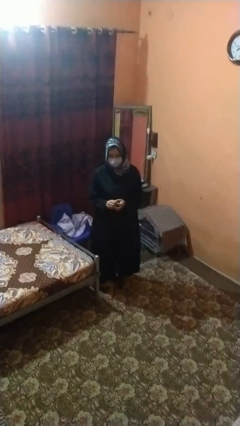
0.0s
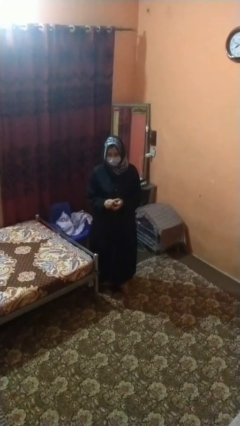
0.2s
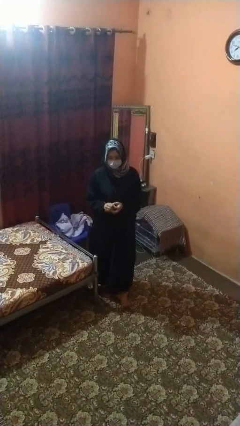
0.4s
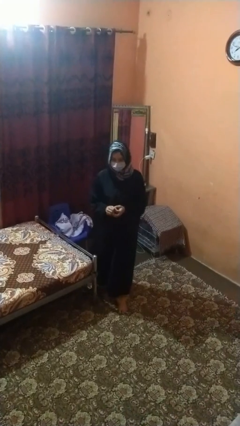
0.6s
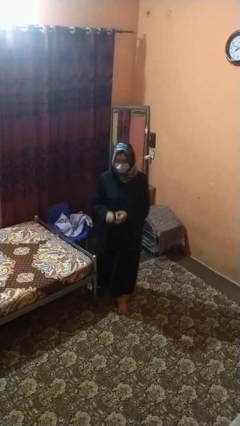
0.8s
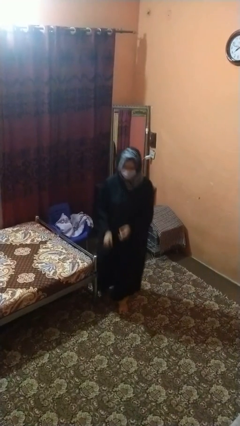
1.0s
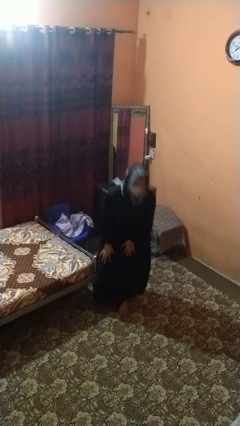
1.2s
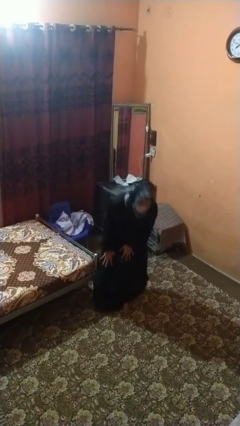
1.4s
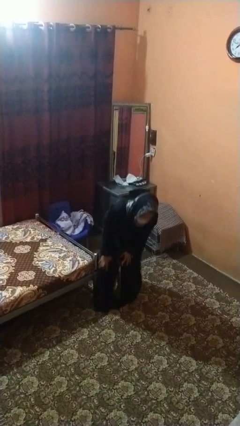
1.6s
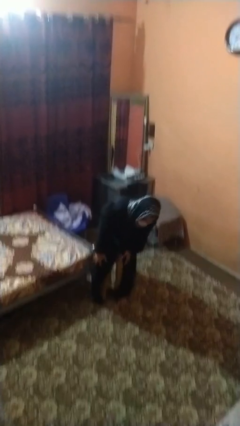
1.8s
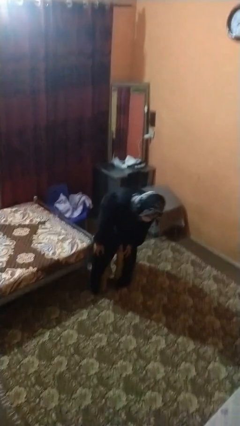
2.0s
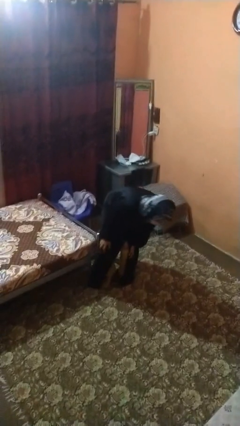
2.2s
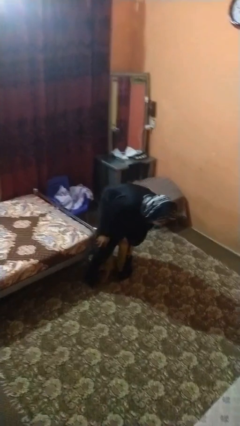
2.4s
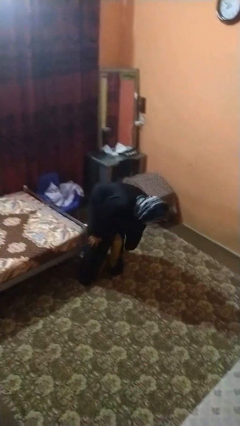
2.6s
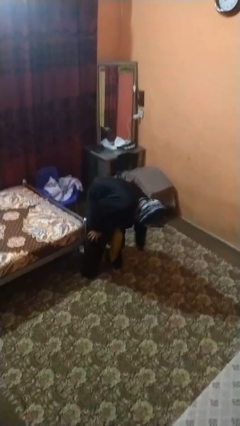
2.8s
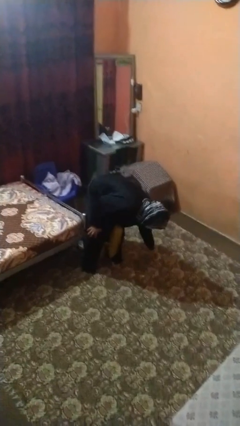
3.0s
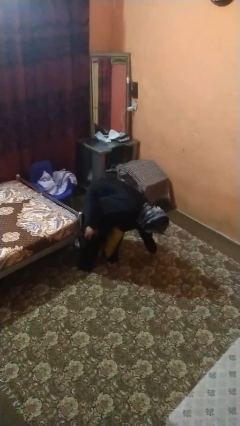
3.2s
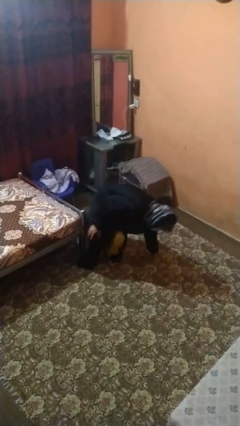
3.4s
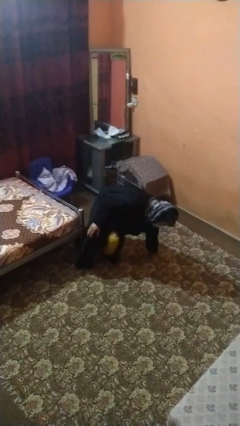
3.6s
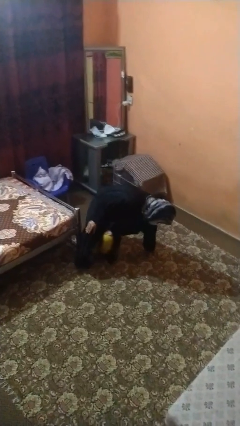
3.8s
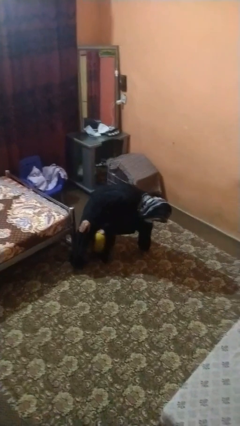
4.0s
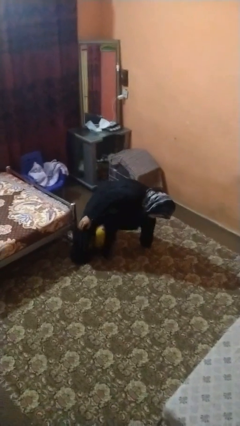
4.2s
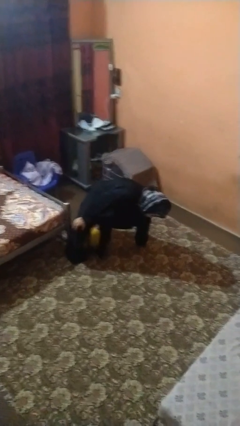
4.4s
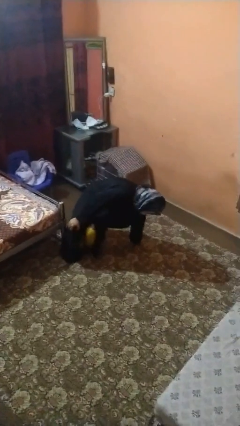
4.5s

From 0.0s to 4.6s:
person trips on object on floor

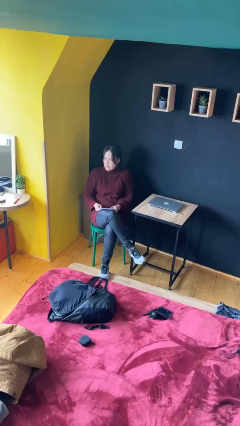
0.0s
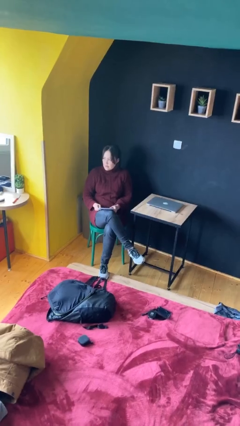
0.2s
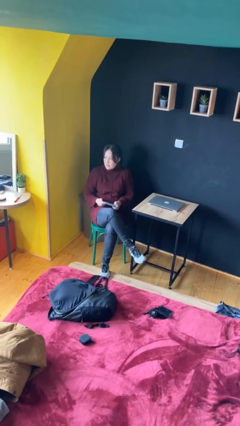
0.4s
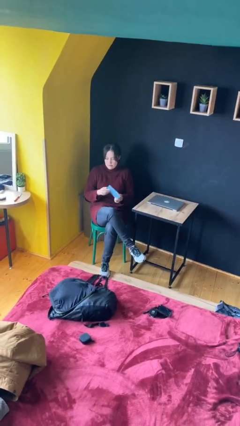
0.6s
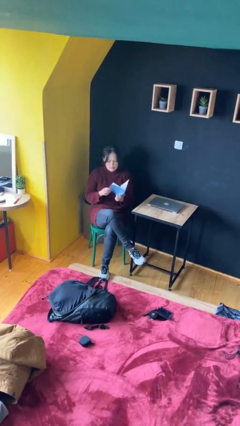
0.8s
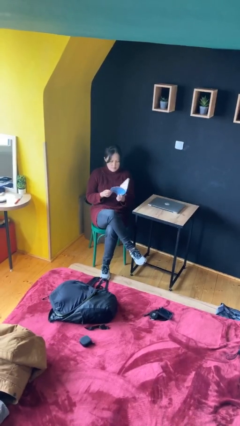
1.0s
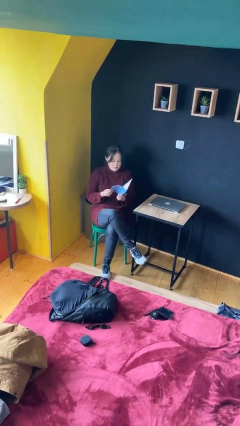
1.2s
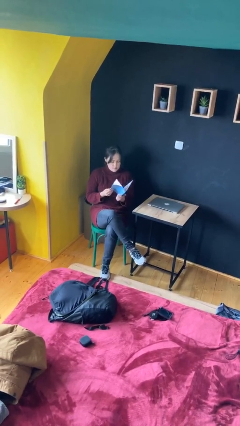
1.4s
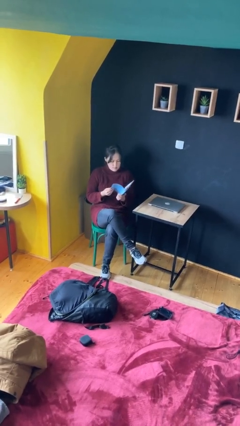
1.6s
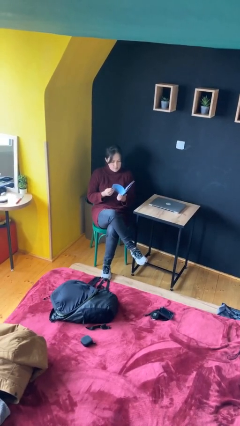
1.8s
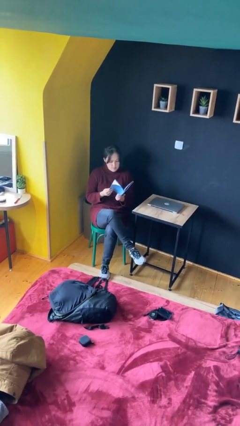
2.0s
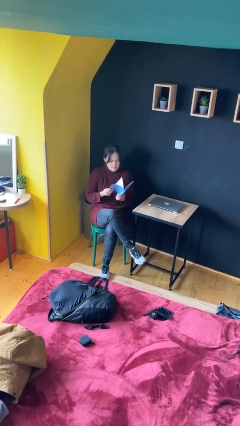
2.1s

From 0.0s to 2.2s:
person reads document

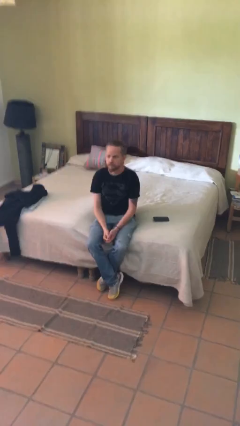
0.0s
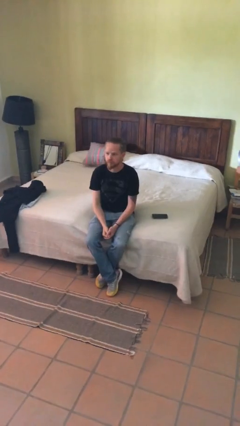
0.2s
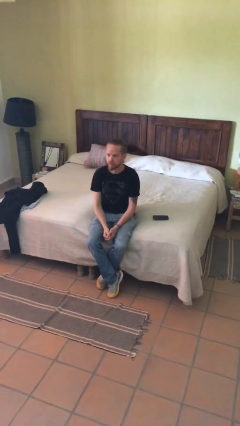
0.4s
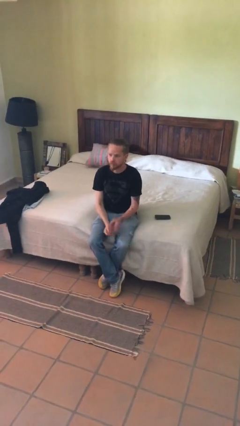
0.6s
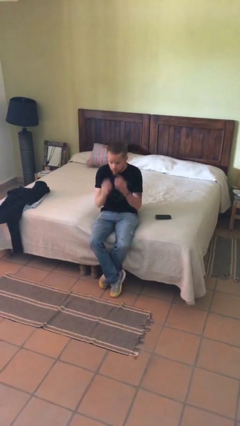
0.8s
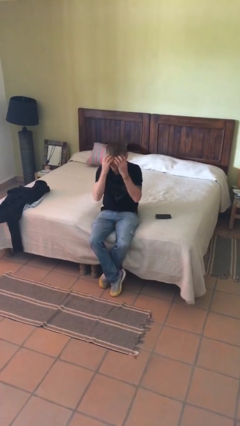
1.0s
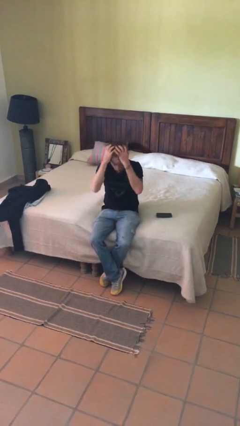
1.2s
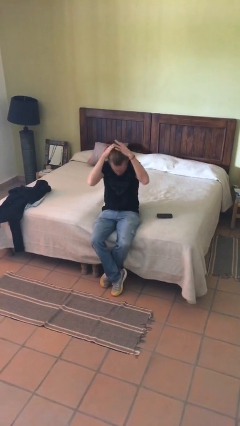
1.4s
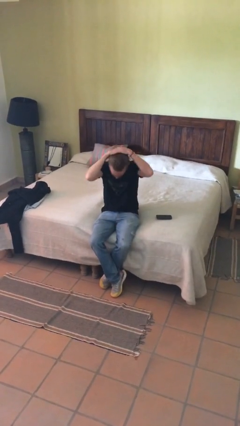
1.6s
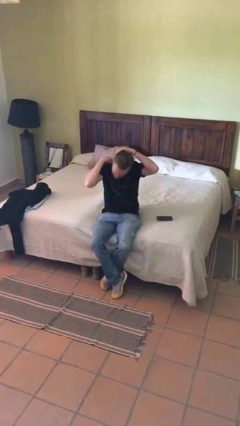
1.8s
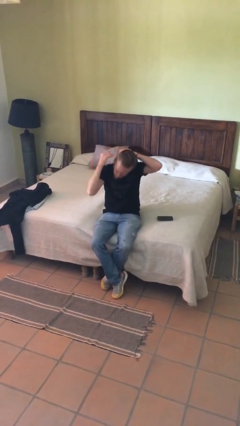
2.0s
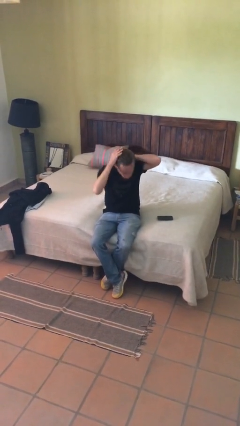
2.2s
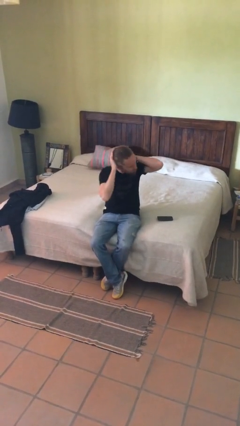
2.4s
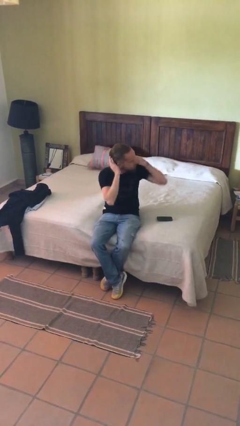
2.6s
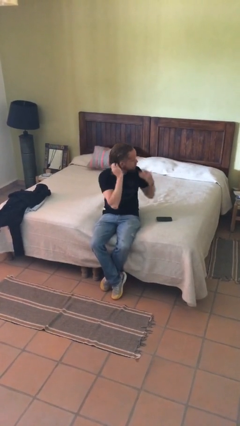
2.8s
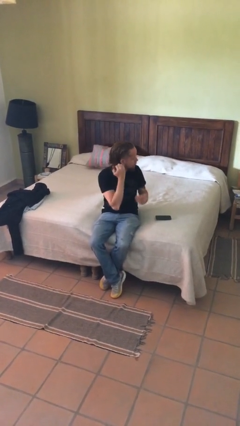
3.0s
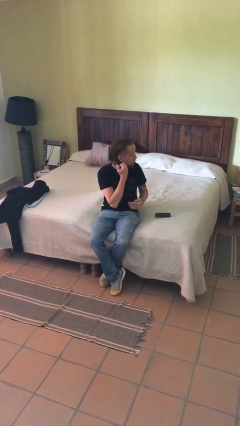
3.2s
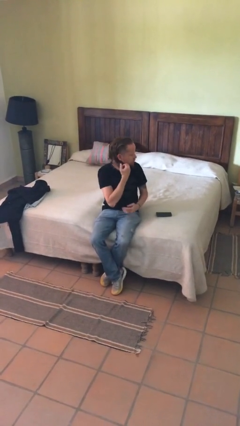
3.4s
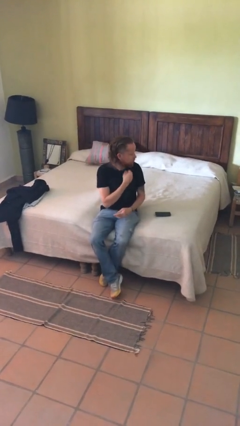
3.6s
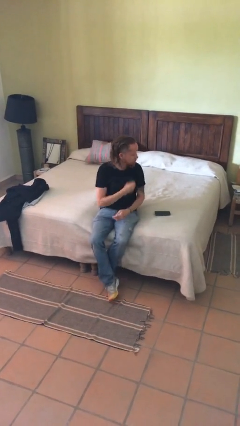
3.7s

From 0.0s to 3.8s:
person strokes hair

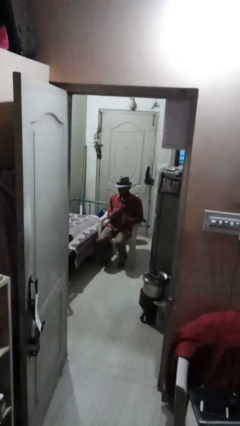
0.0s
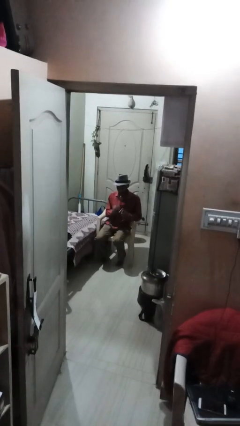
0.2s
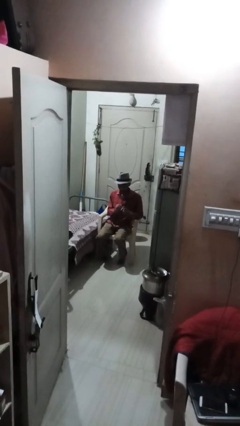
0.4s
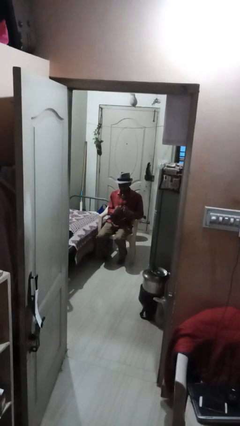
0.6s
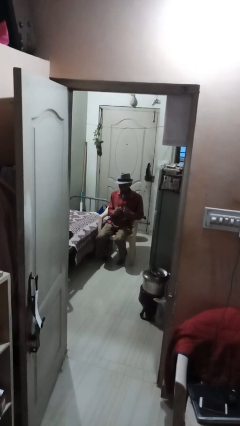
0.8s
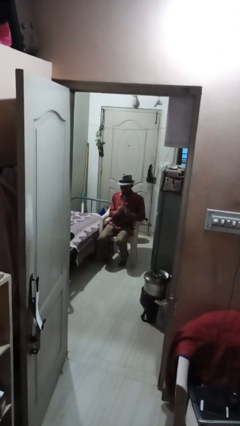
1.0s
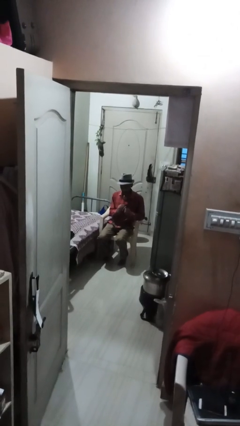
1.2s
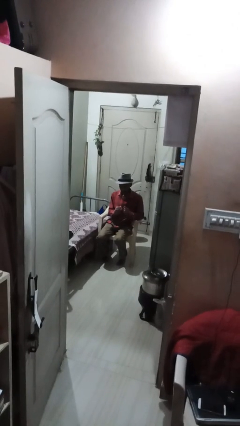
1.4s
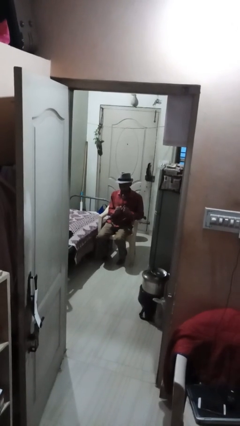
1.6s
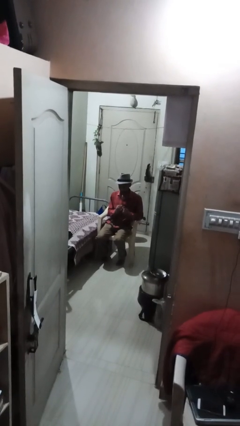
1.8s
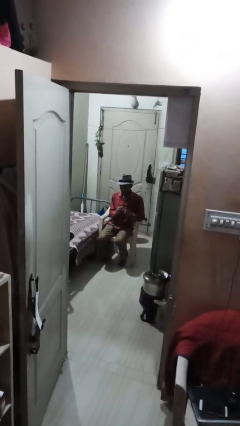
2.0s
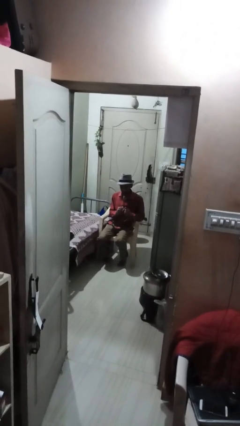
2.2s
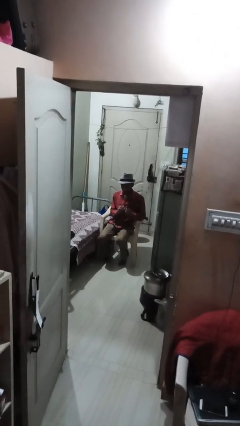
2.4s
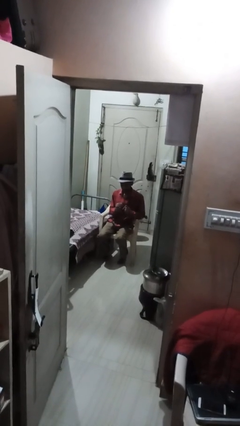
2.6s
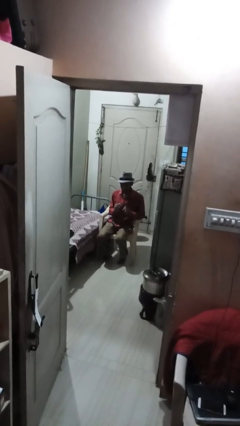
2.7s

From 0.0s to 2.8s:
person files fingernails

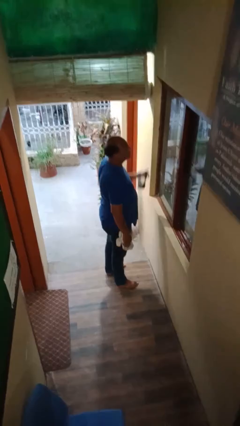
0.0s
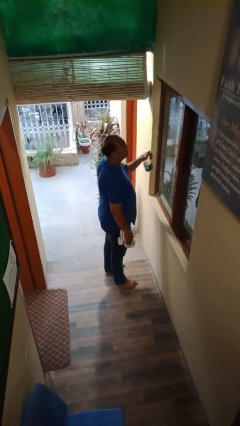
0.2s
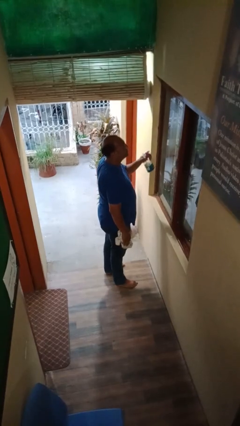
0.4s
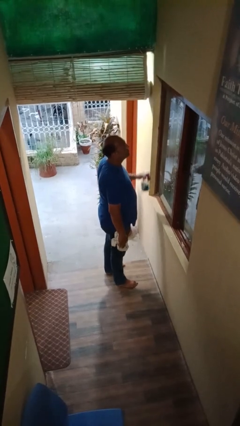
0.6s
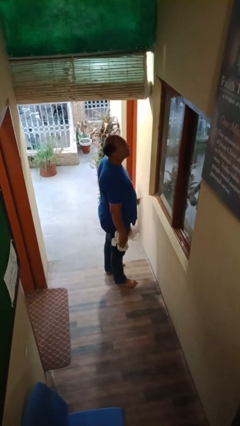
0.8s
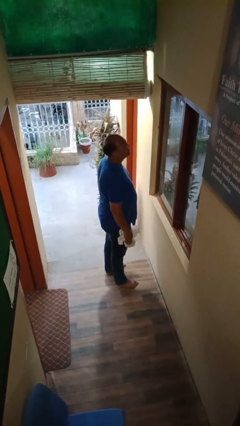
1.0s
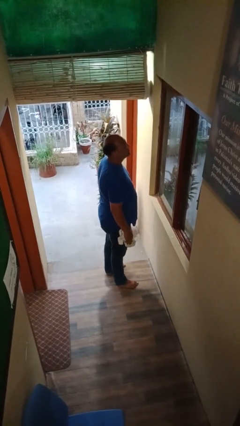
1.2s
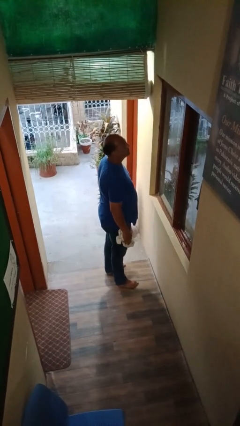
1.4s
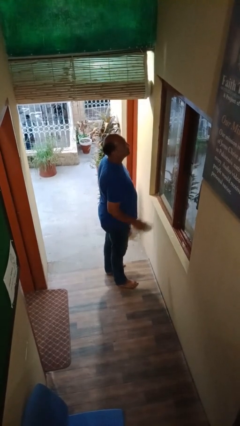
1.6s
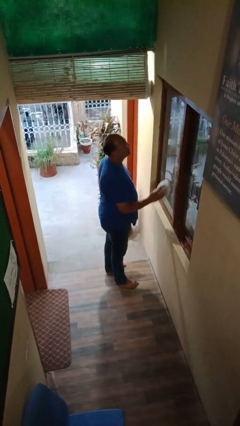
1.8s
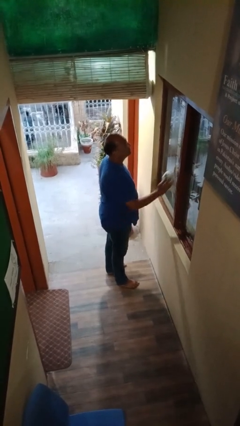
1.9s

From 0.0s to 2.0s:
person sprays from bottle

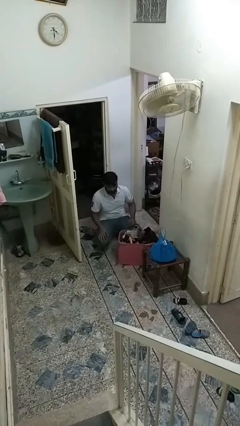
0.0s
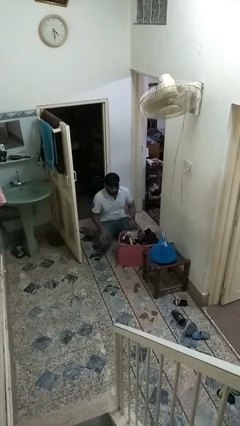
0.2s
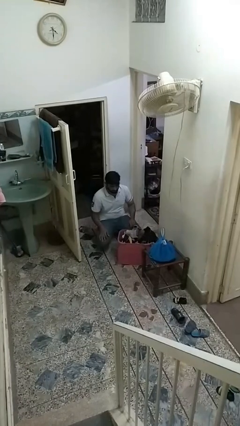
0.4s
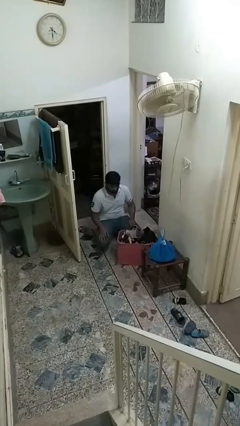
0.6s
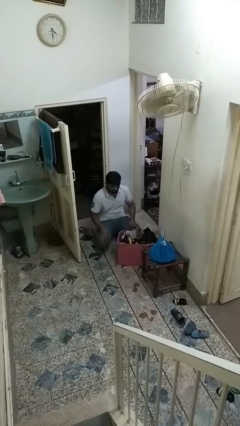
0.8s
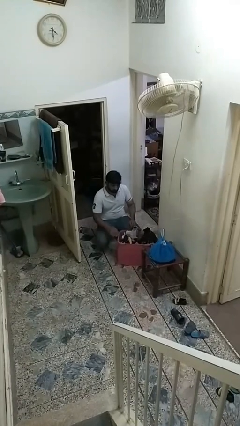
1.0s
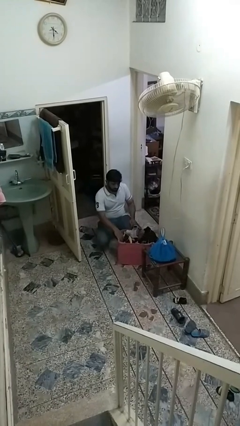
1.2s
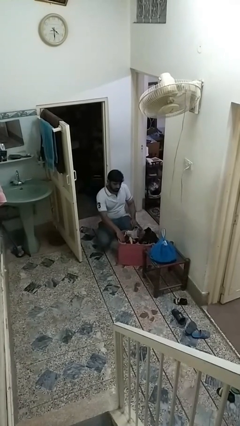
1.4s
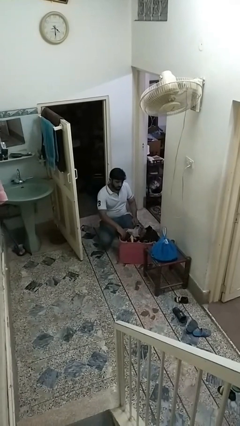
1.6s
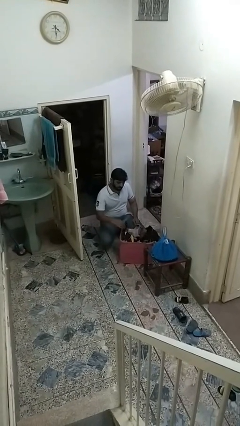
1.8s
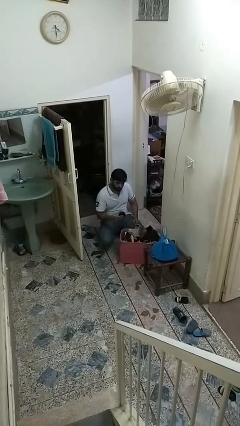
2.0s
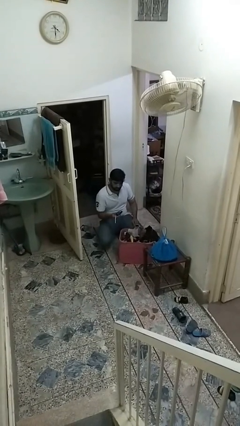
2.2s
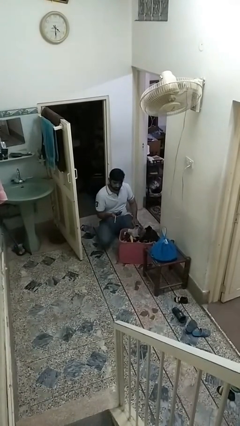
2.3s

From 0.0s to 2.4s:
person takes object from basket
